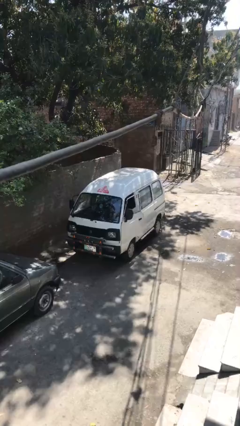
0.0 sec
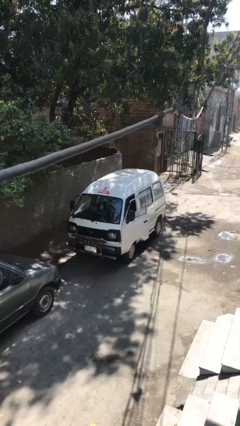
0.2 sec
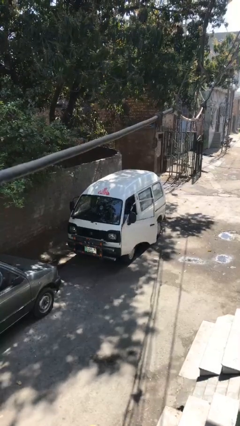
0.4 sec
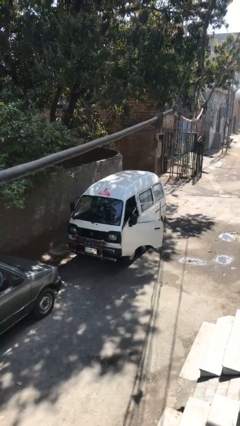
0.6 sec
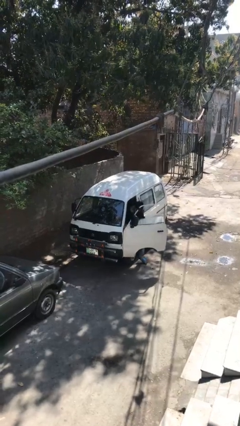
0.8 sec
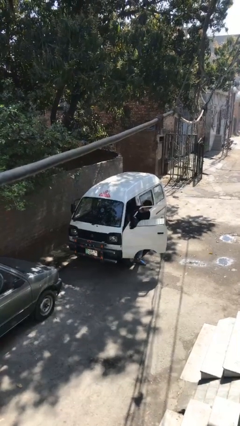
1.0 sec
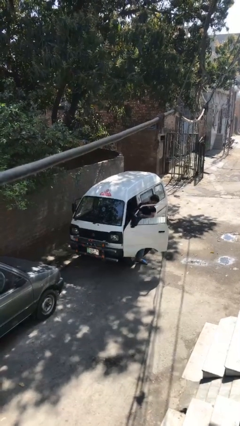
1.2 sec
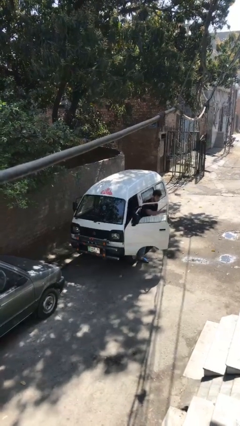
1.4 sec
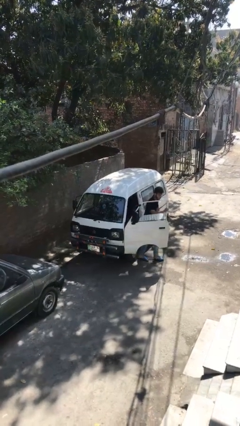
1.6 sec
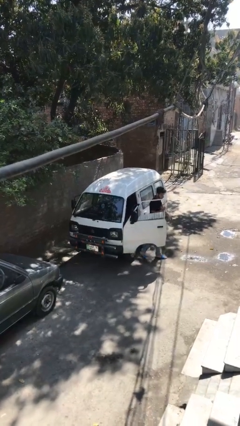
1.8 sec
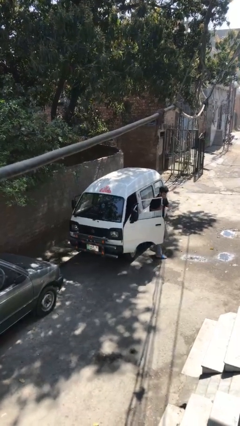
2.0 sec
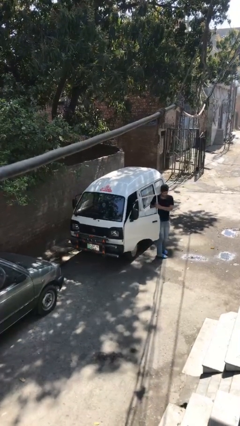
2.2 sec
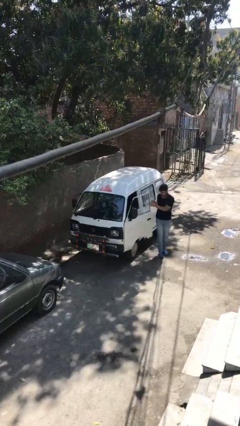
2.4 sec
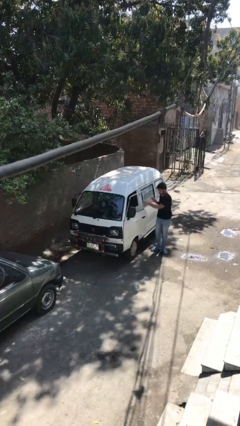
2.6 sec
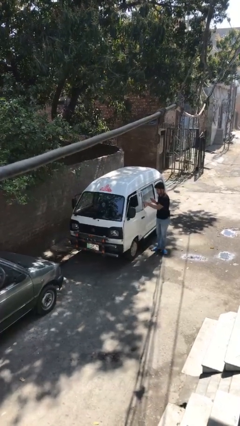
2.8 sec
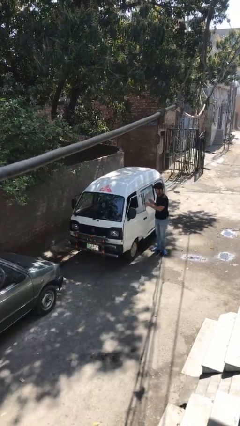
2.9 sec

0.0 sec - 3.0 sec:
car drops off person

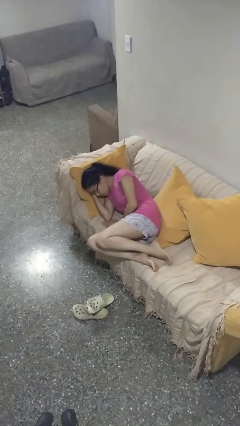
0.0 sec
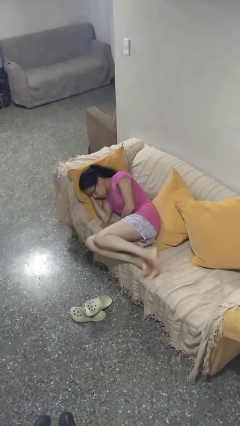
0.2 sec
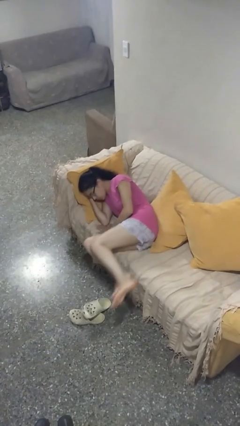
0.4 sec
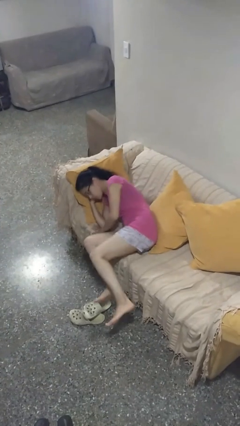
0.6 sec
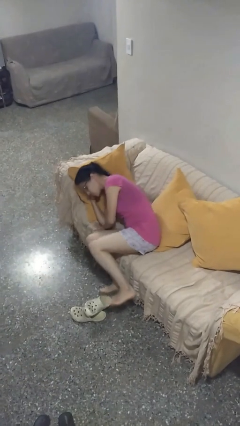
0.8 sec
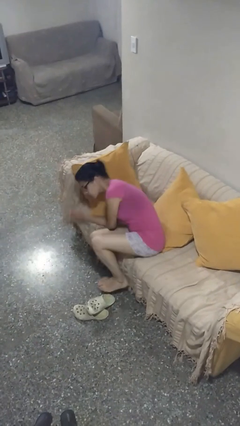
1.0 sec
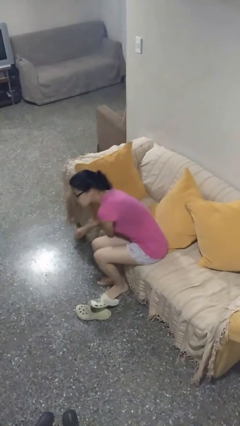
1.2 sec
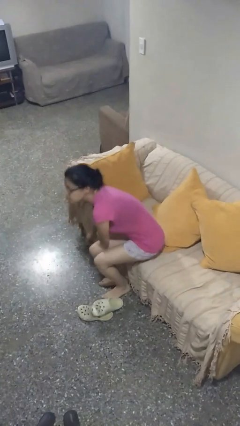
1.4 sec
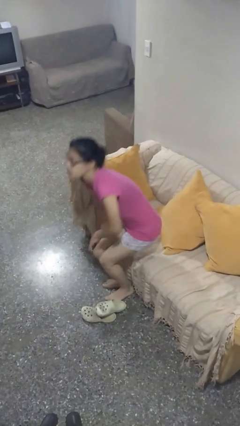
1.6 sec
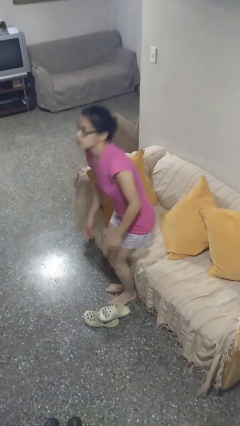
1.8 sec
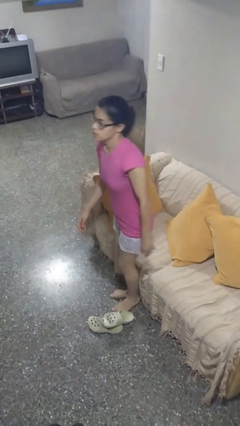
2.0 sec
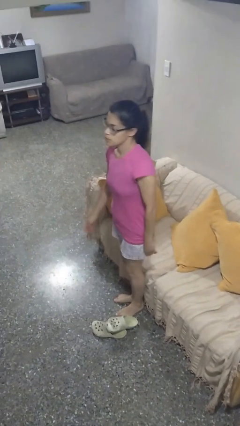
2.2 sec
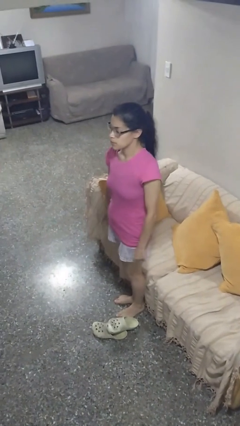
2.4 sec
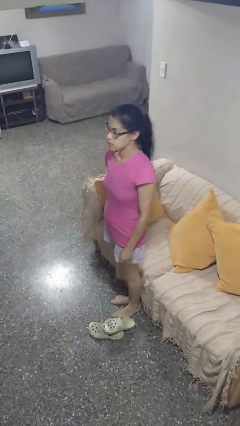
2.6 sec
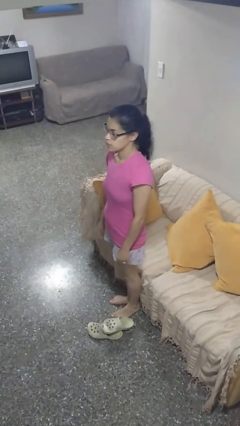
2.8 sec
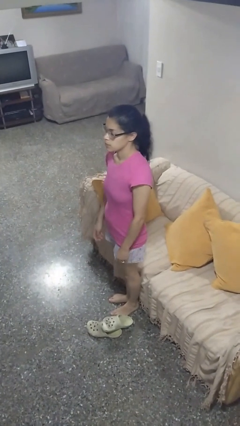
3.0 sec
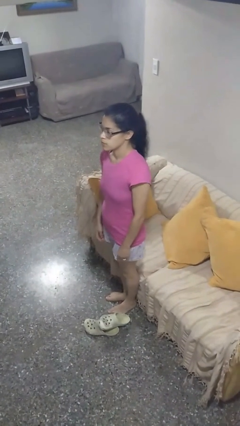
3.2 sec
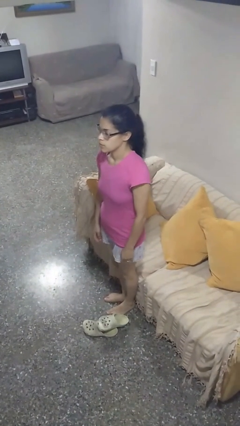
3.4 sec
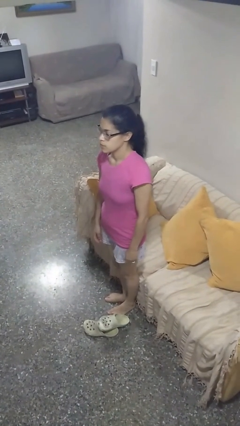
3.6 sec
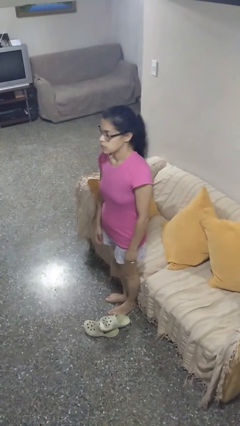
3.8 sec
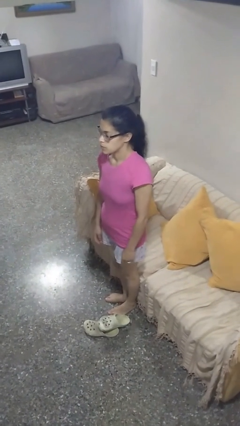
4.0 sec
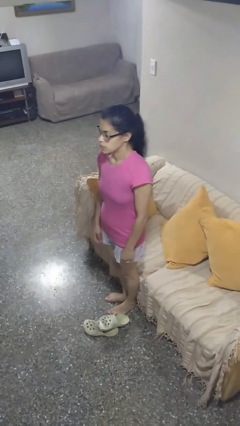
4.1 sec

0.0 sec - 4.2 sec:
person stands up

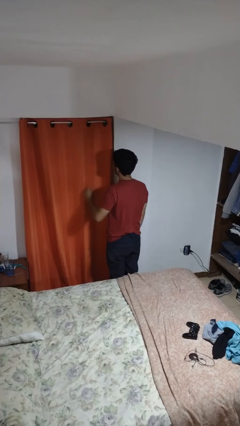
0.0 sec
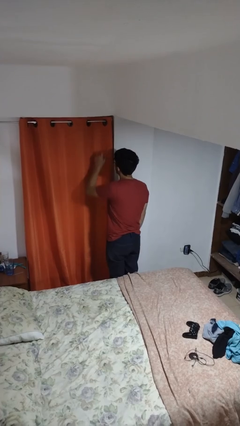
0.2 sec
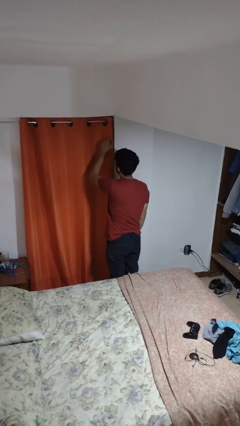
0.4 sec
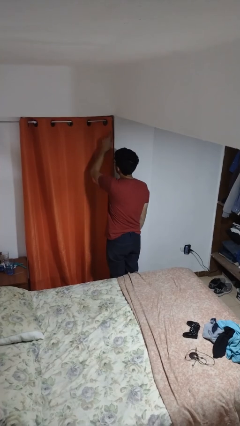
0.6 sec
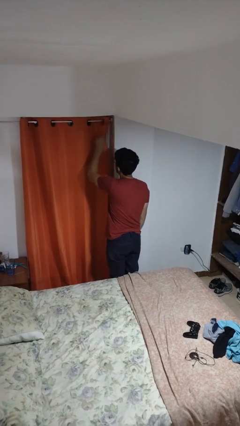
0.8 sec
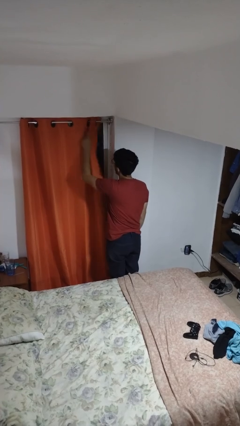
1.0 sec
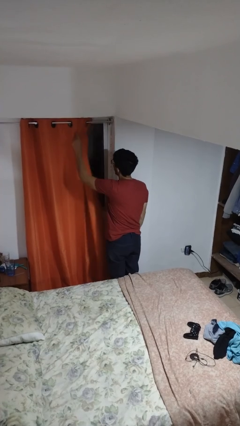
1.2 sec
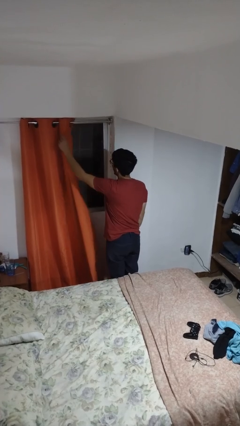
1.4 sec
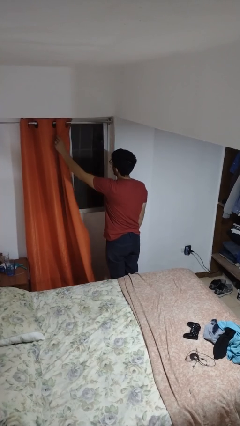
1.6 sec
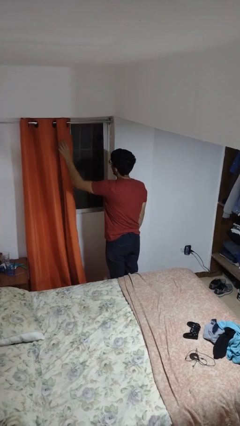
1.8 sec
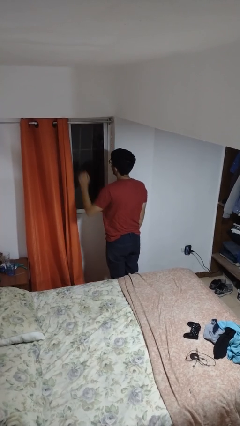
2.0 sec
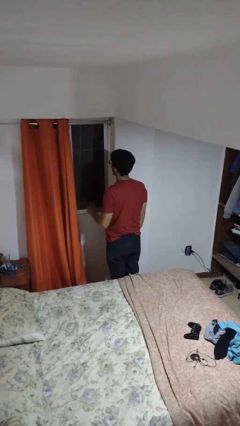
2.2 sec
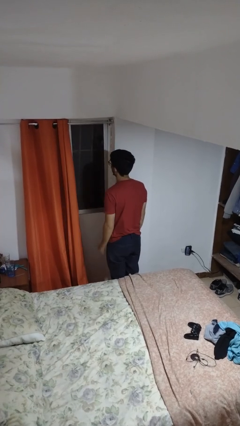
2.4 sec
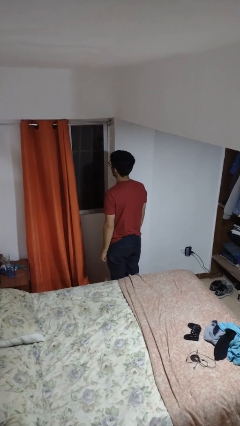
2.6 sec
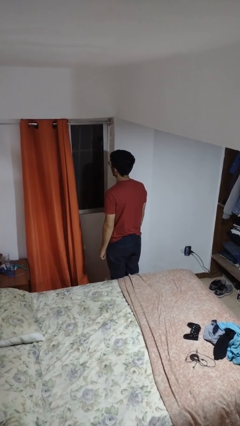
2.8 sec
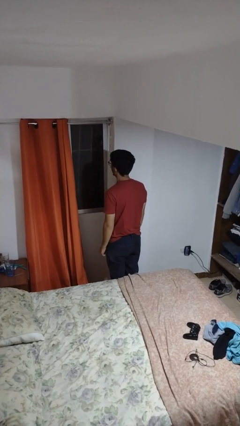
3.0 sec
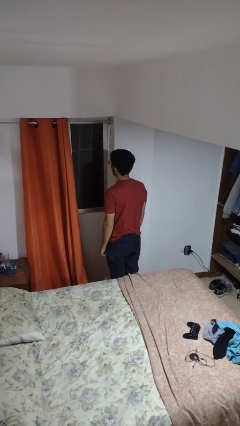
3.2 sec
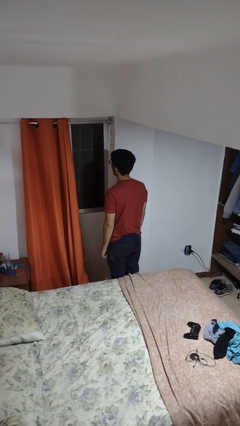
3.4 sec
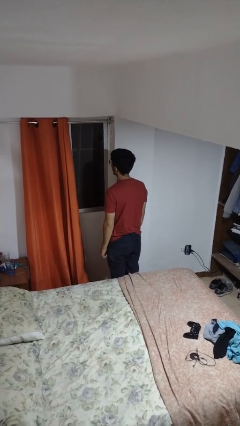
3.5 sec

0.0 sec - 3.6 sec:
person opens curtains

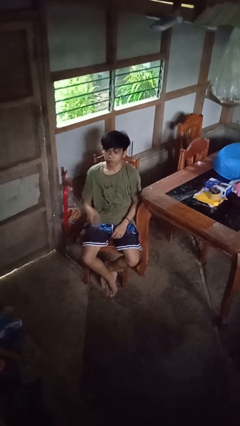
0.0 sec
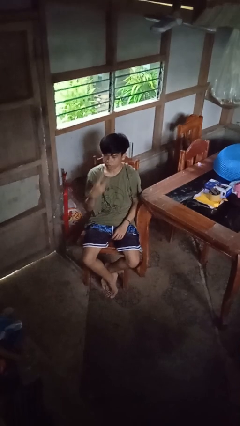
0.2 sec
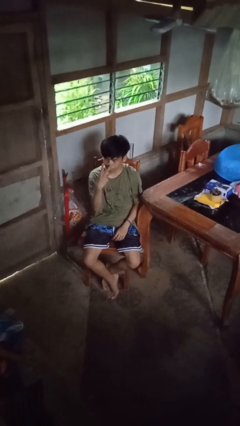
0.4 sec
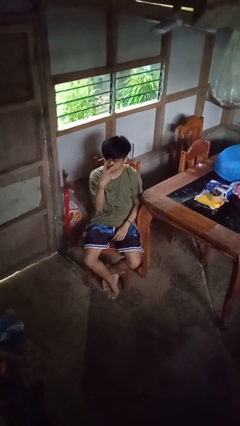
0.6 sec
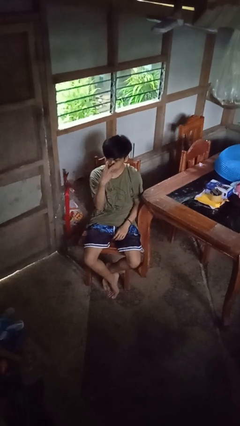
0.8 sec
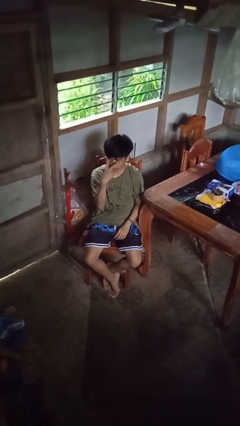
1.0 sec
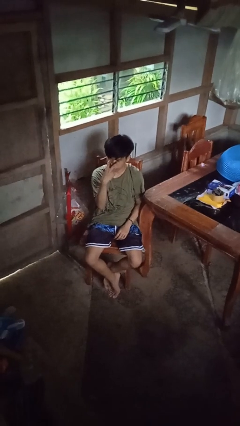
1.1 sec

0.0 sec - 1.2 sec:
person gestures watch closely

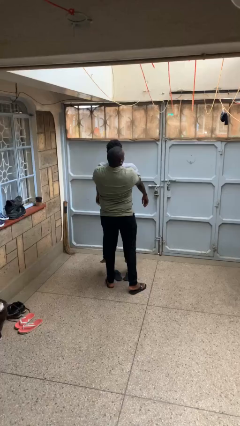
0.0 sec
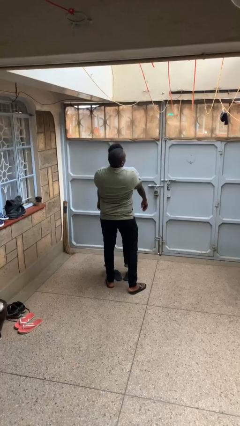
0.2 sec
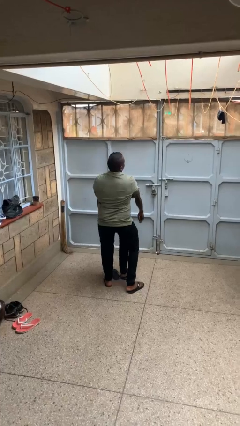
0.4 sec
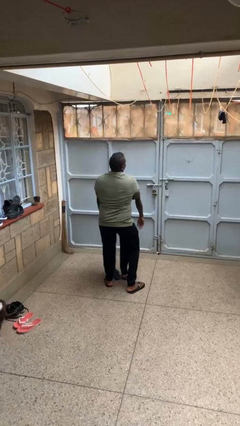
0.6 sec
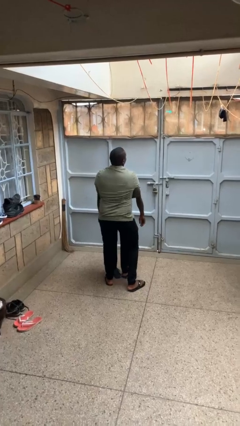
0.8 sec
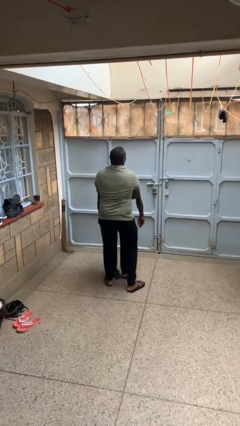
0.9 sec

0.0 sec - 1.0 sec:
person puts down person

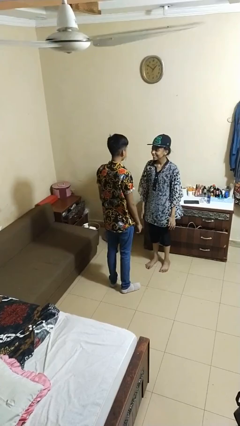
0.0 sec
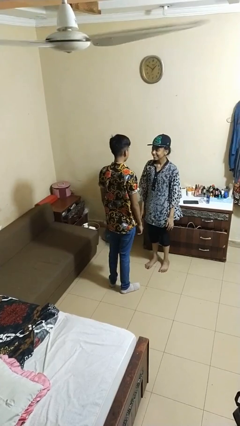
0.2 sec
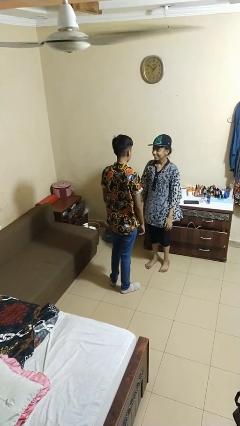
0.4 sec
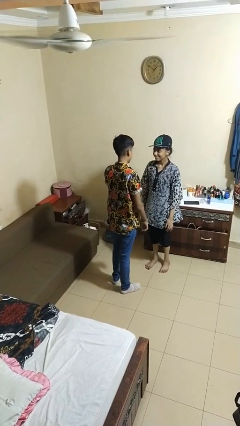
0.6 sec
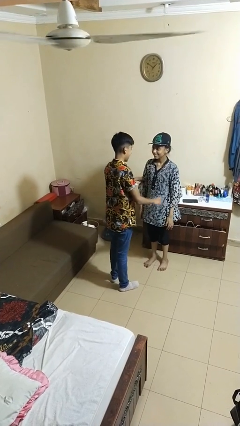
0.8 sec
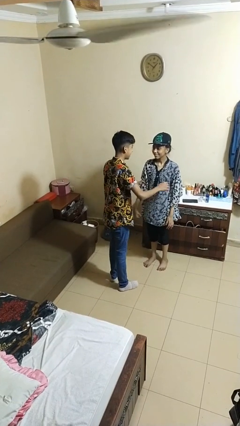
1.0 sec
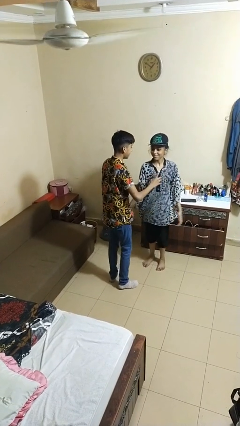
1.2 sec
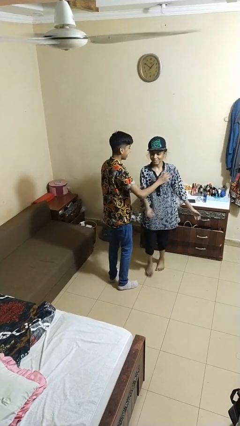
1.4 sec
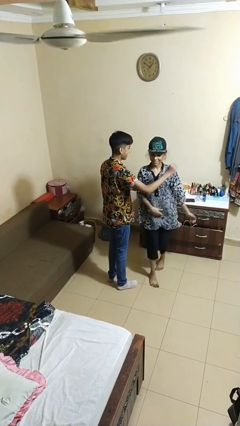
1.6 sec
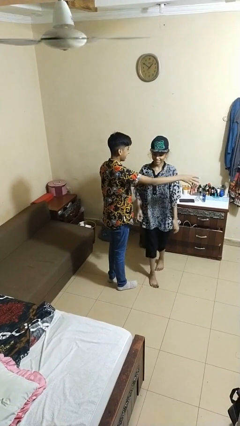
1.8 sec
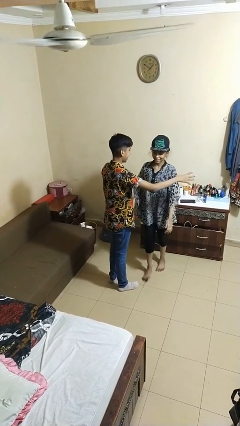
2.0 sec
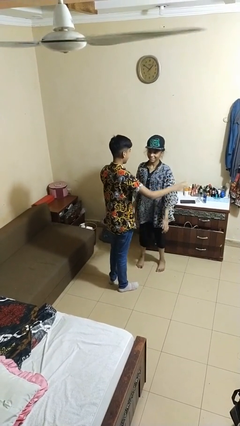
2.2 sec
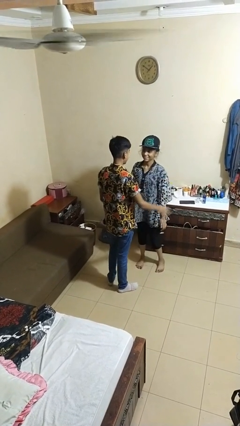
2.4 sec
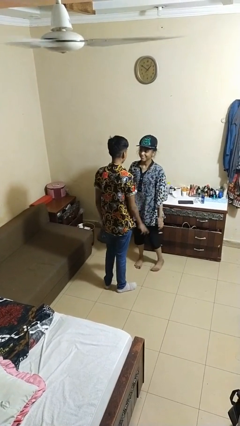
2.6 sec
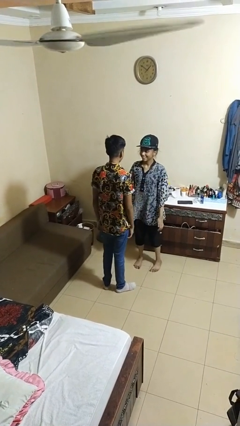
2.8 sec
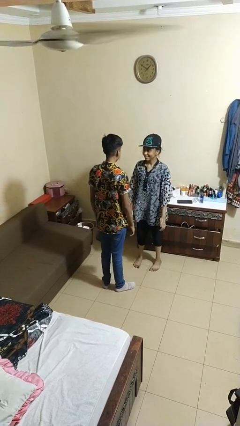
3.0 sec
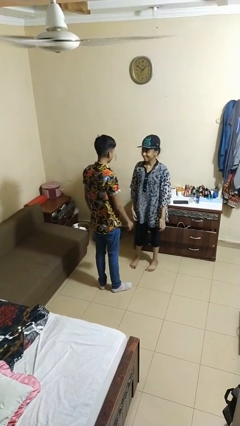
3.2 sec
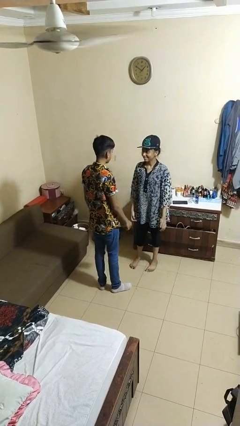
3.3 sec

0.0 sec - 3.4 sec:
person shoves person

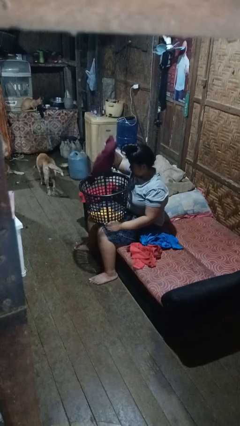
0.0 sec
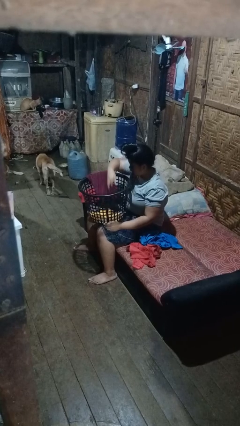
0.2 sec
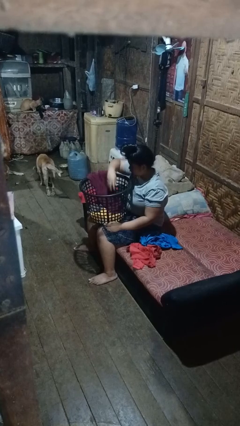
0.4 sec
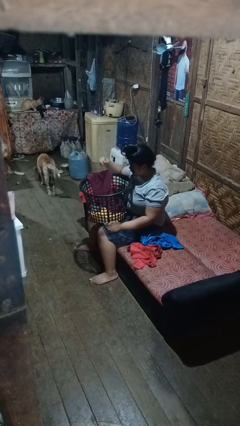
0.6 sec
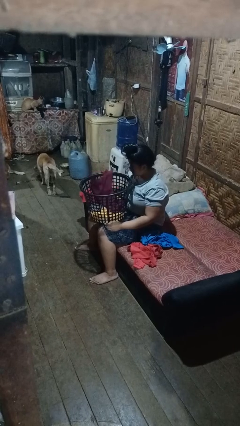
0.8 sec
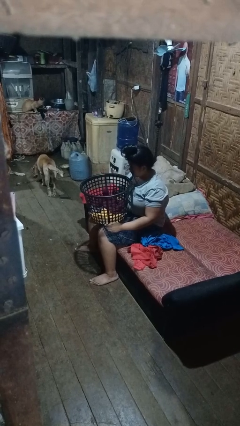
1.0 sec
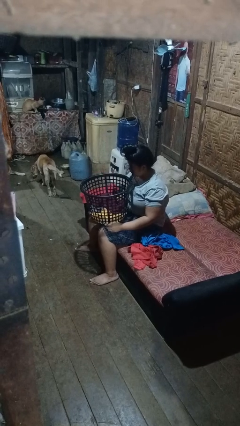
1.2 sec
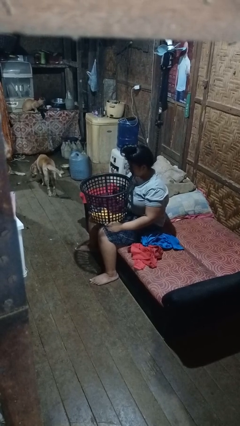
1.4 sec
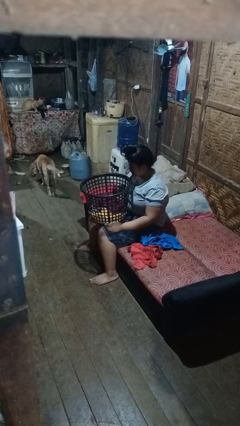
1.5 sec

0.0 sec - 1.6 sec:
person puts object into basket
